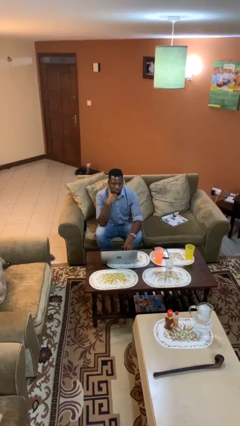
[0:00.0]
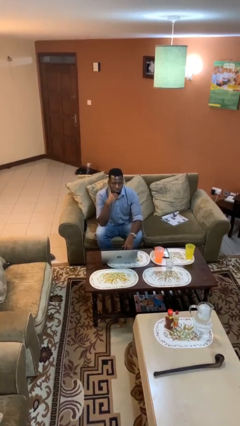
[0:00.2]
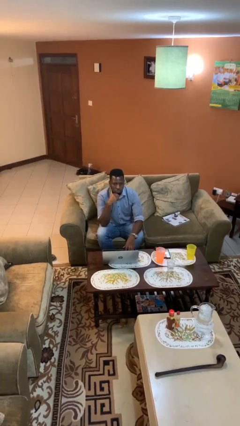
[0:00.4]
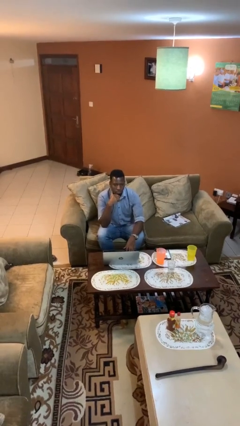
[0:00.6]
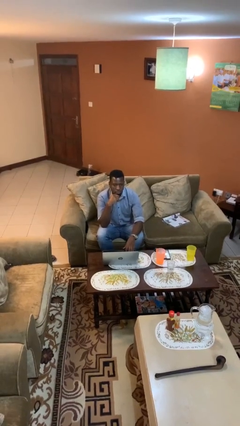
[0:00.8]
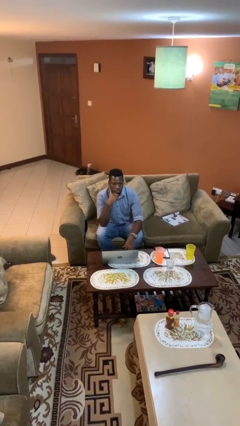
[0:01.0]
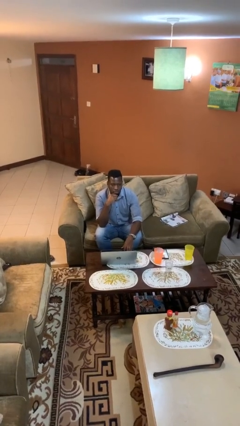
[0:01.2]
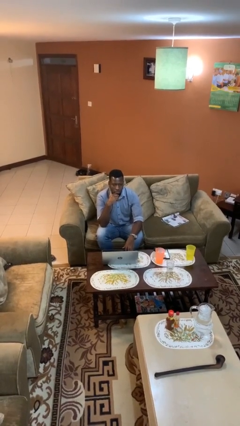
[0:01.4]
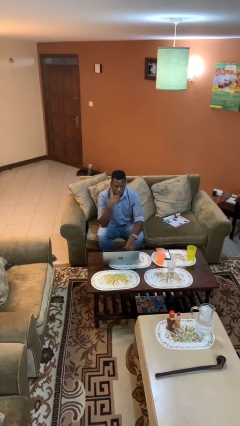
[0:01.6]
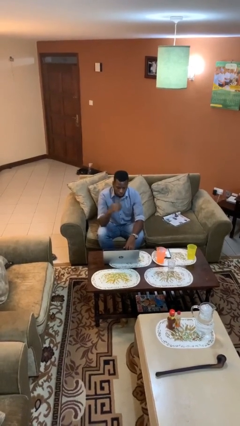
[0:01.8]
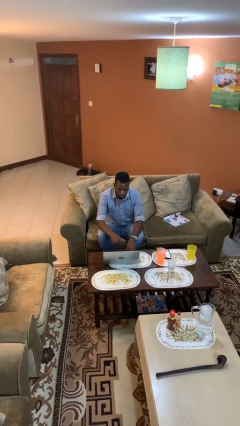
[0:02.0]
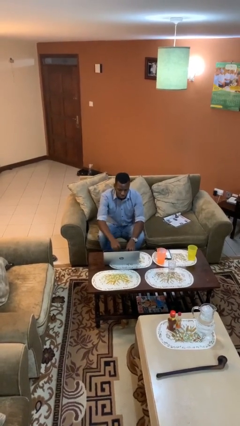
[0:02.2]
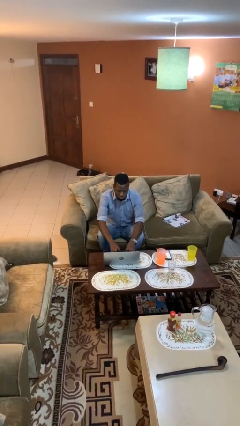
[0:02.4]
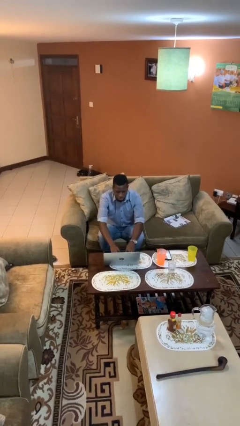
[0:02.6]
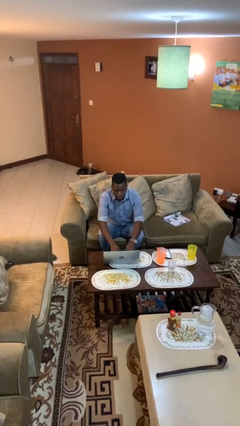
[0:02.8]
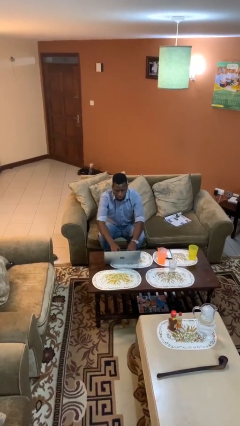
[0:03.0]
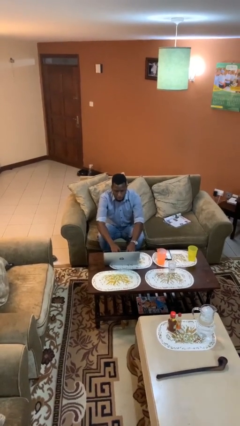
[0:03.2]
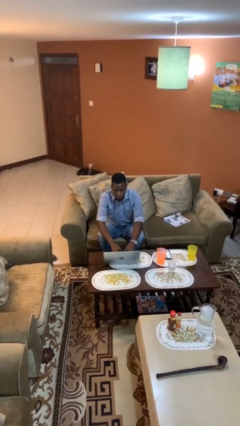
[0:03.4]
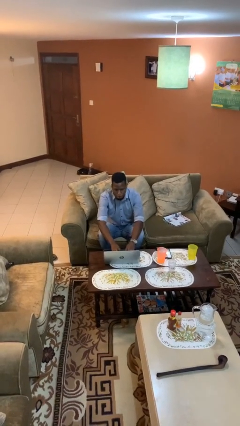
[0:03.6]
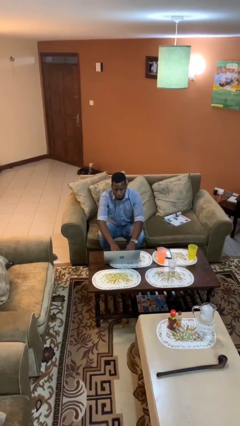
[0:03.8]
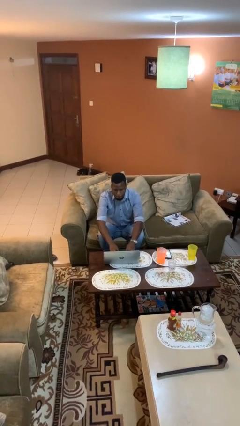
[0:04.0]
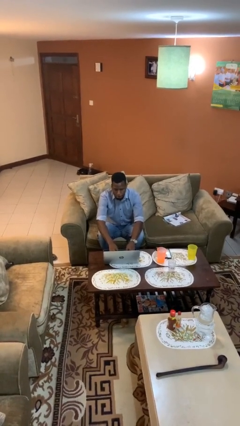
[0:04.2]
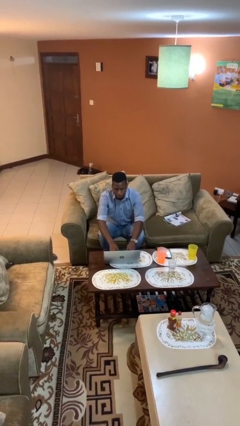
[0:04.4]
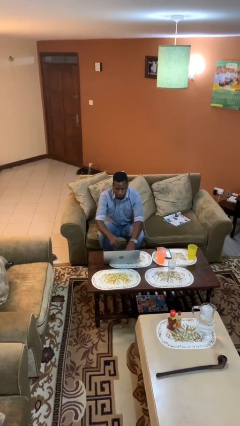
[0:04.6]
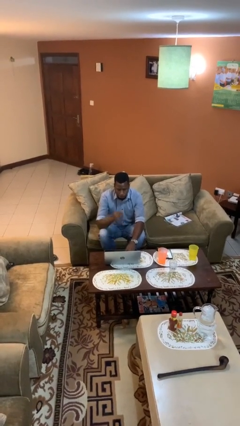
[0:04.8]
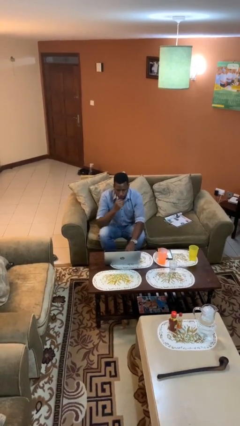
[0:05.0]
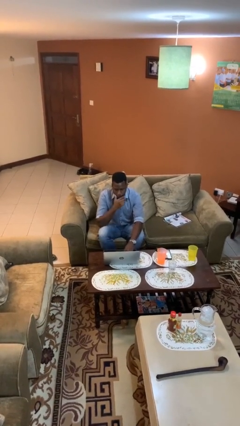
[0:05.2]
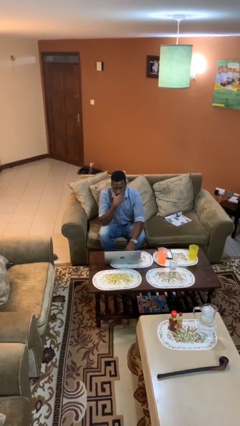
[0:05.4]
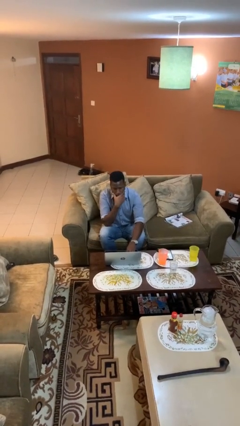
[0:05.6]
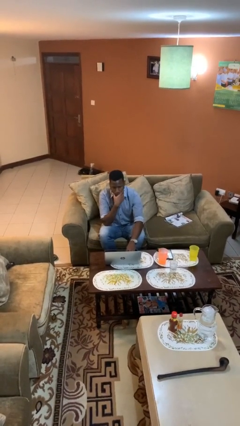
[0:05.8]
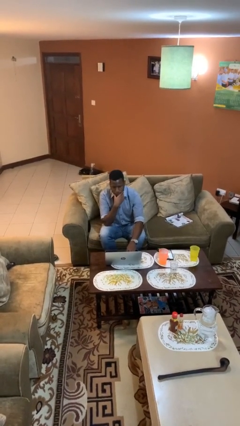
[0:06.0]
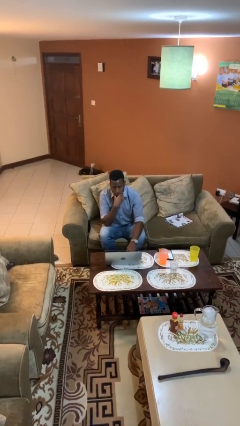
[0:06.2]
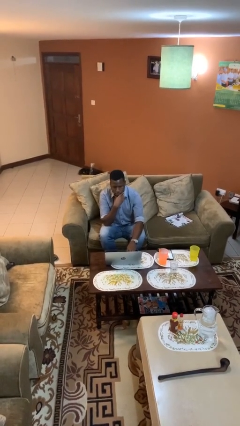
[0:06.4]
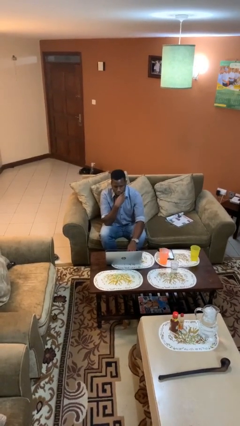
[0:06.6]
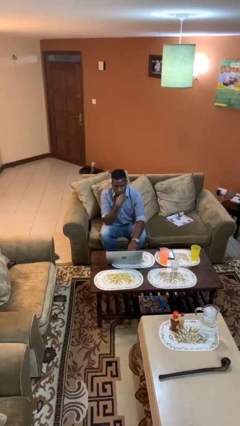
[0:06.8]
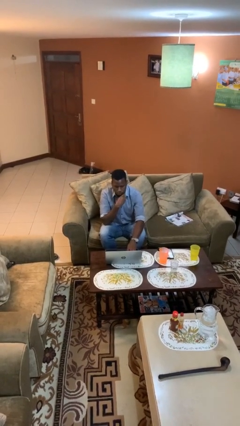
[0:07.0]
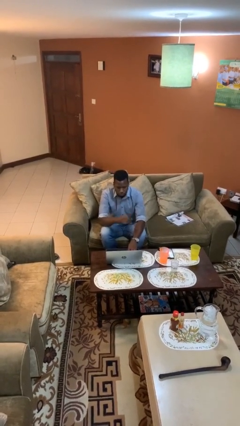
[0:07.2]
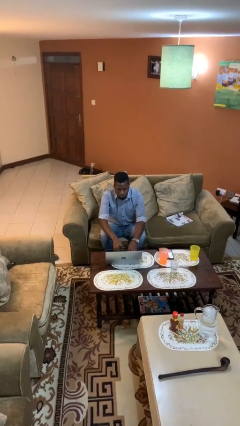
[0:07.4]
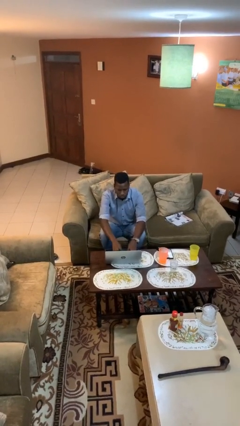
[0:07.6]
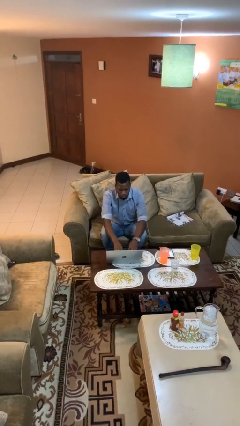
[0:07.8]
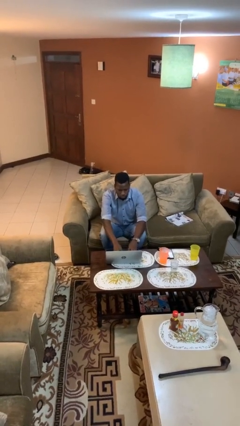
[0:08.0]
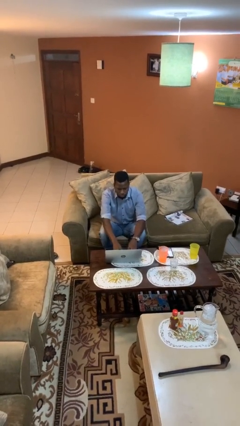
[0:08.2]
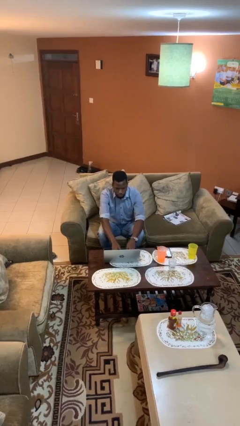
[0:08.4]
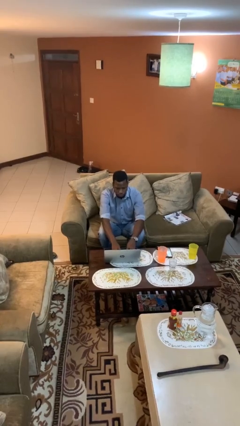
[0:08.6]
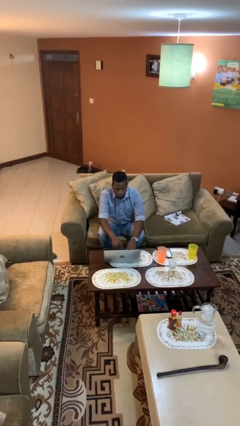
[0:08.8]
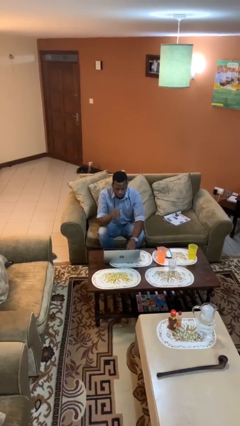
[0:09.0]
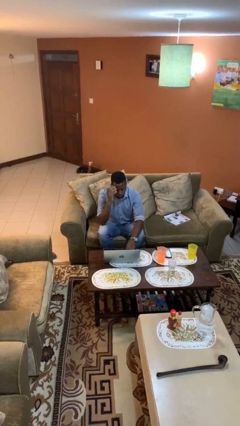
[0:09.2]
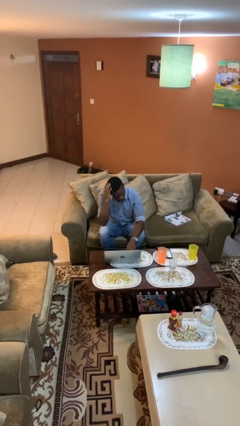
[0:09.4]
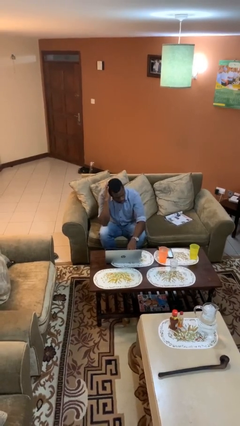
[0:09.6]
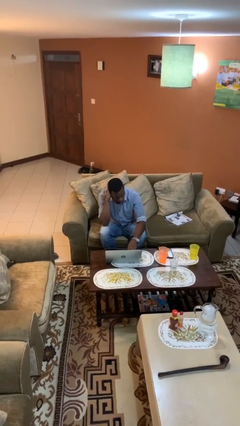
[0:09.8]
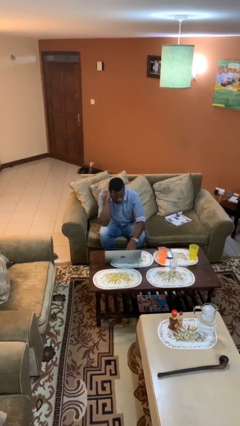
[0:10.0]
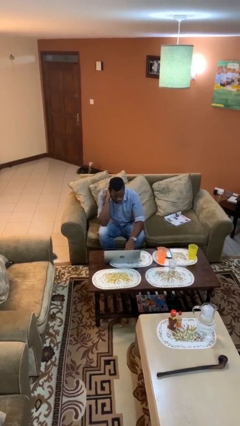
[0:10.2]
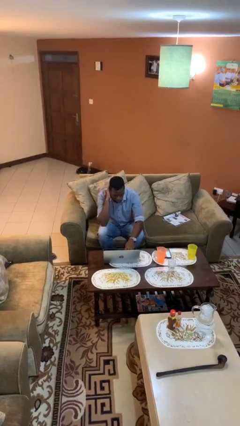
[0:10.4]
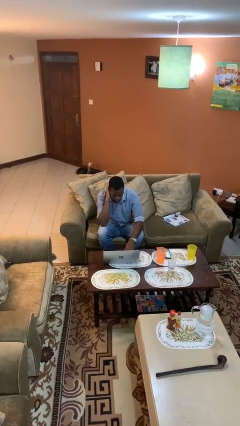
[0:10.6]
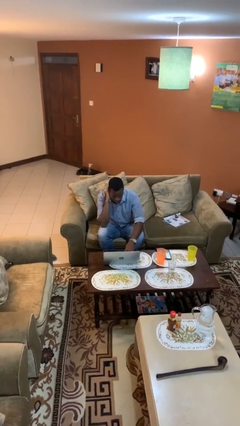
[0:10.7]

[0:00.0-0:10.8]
person interacts with laptop

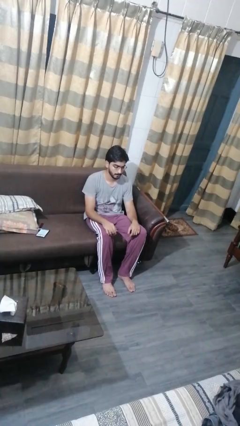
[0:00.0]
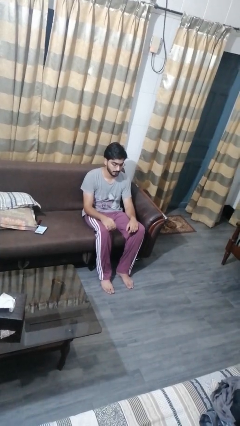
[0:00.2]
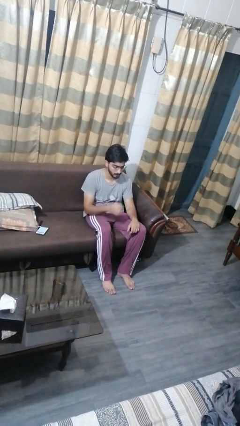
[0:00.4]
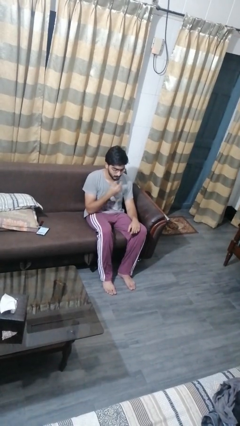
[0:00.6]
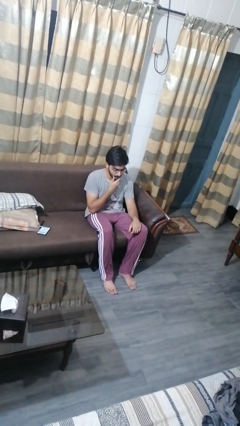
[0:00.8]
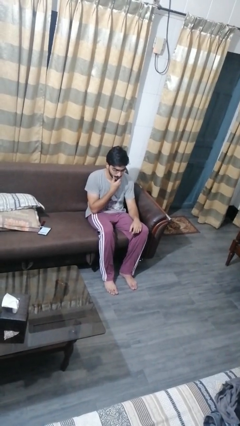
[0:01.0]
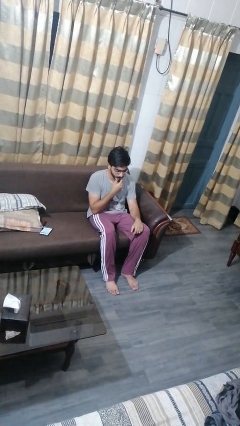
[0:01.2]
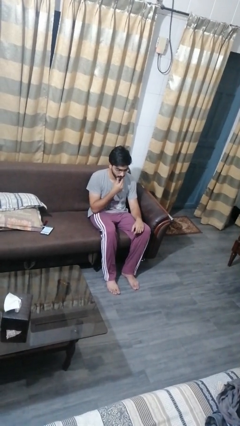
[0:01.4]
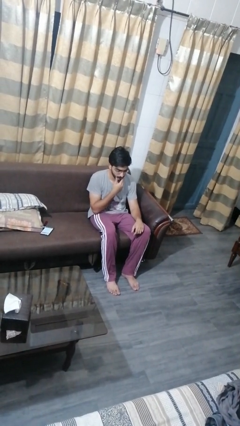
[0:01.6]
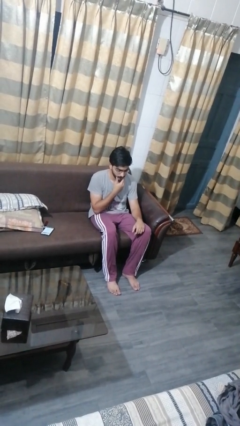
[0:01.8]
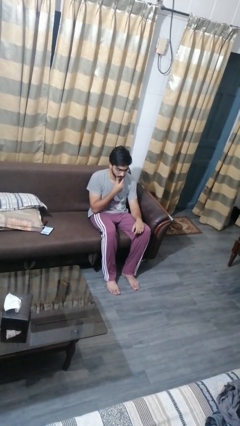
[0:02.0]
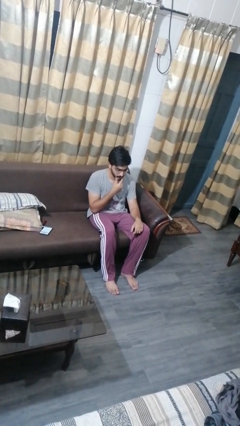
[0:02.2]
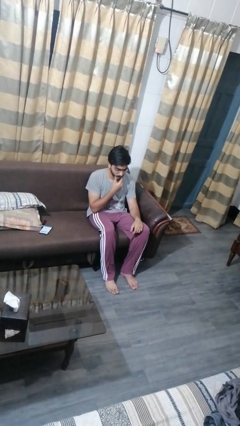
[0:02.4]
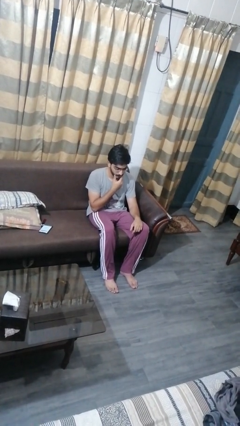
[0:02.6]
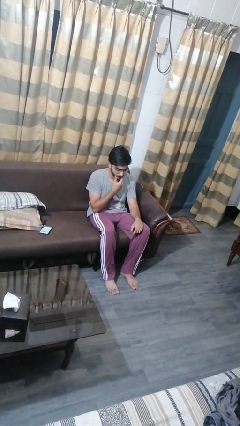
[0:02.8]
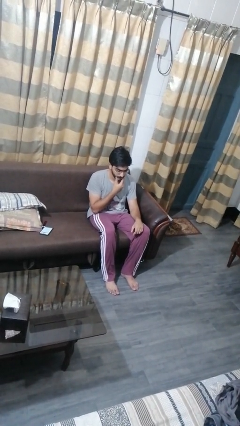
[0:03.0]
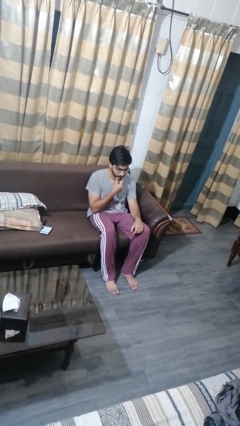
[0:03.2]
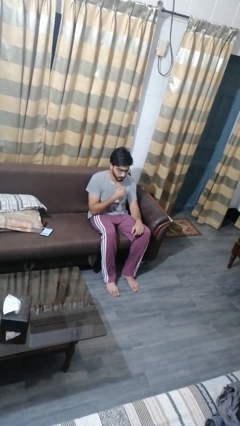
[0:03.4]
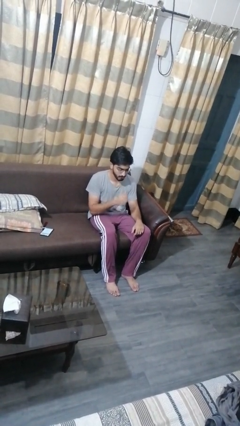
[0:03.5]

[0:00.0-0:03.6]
person strokes chin

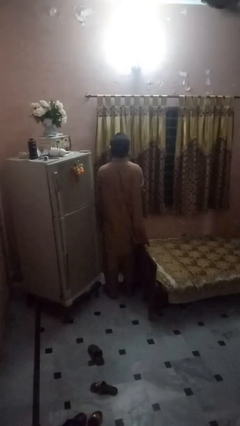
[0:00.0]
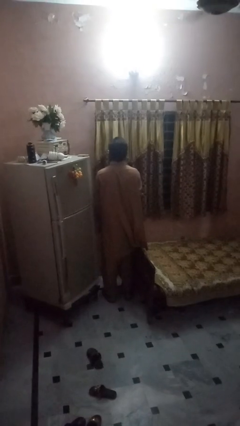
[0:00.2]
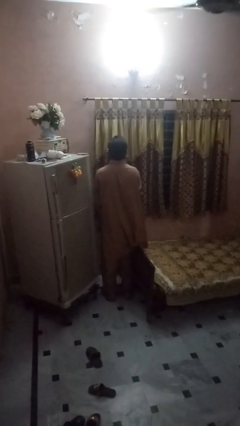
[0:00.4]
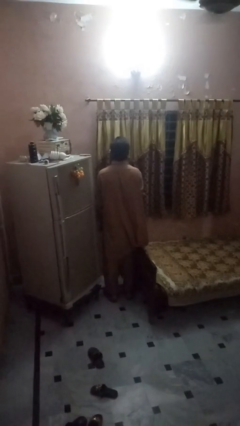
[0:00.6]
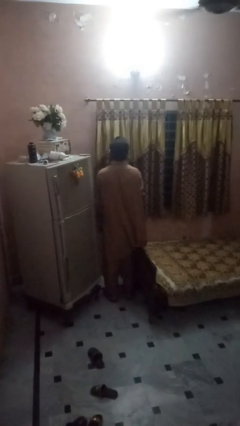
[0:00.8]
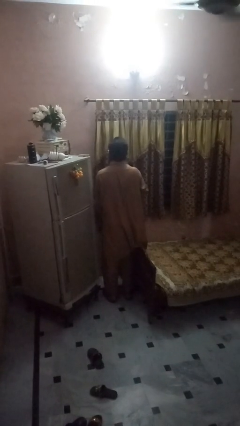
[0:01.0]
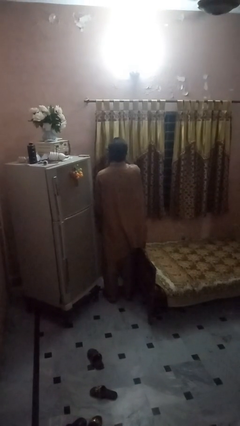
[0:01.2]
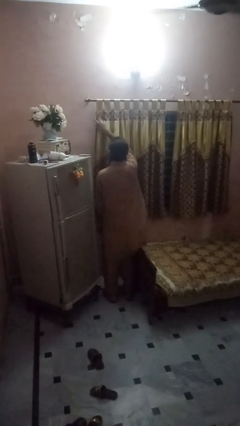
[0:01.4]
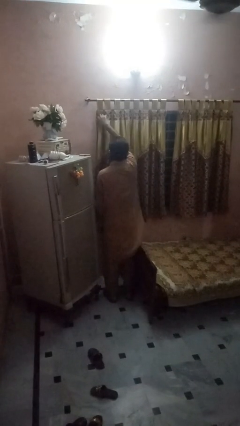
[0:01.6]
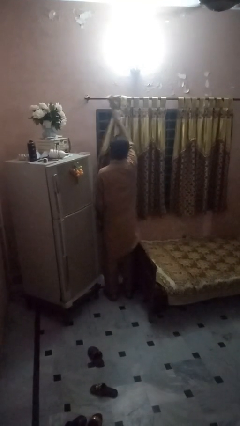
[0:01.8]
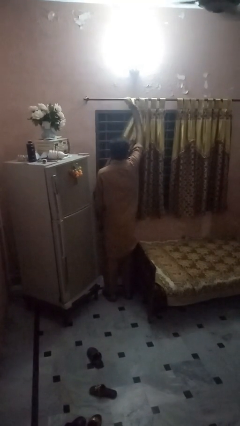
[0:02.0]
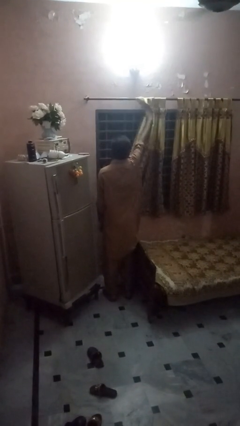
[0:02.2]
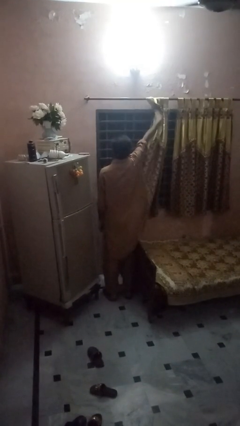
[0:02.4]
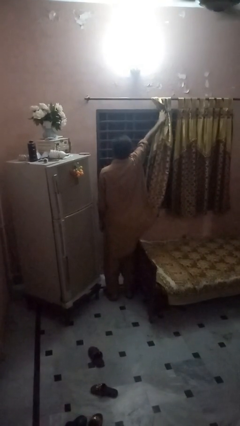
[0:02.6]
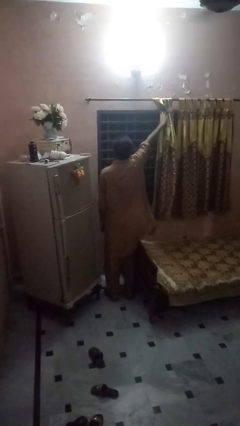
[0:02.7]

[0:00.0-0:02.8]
person opens curtains

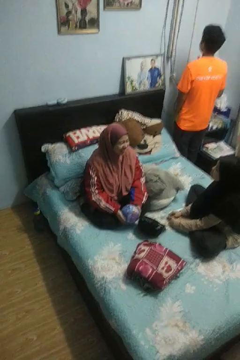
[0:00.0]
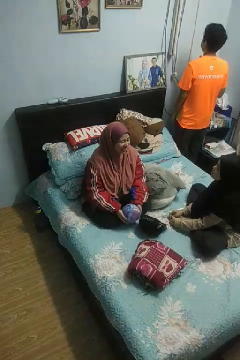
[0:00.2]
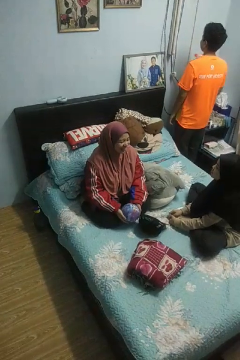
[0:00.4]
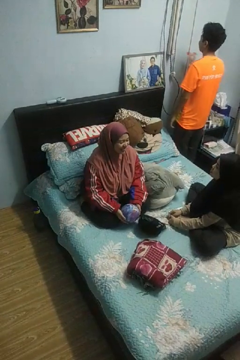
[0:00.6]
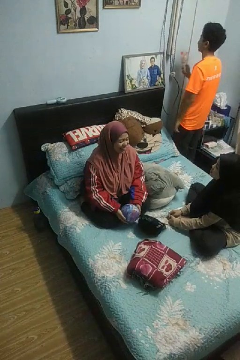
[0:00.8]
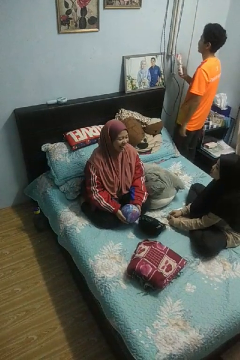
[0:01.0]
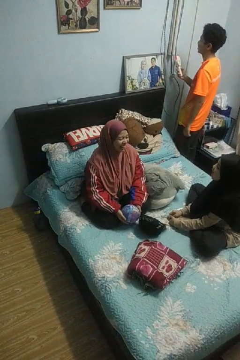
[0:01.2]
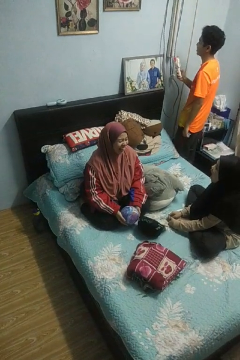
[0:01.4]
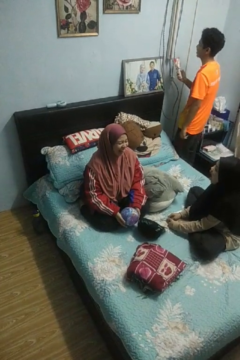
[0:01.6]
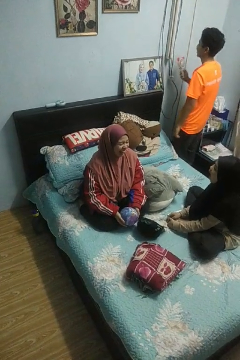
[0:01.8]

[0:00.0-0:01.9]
person laughs with person
